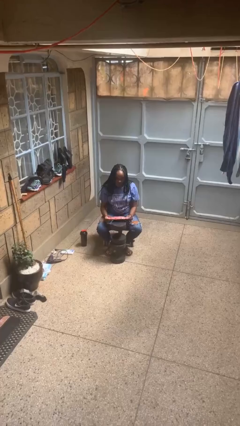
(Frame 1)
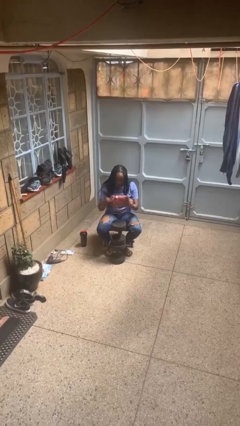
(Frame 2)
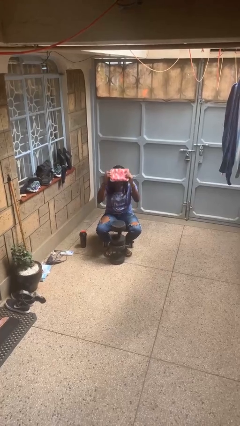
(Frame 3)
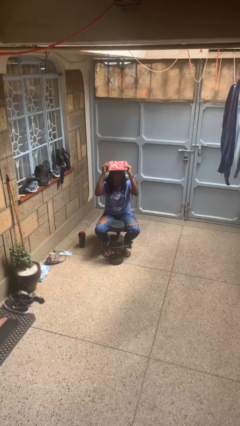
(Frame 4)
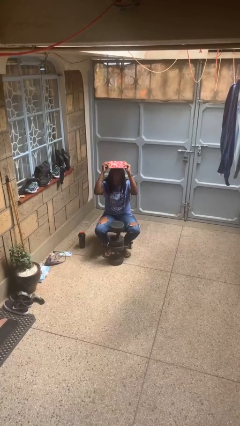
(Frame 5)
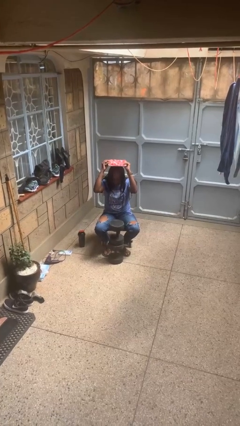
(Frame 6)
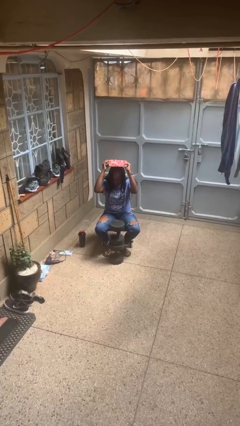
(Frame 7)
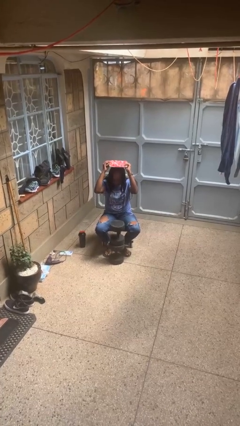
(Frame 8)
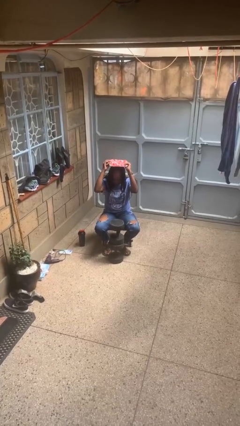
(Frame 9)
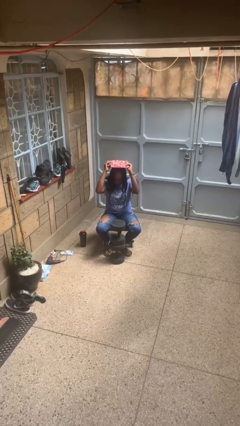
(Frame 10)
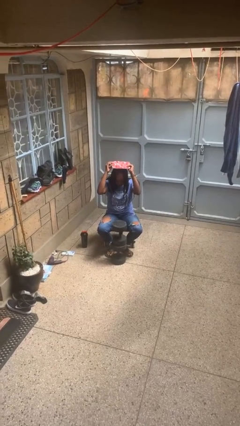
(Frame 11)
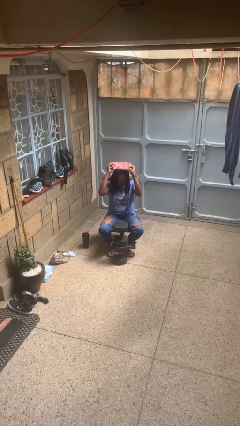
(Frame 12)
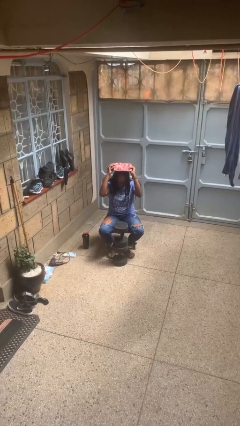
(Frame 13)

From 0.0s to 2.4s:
person holds object above head

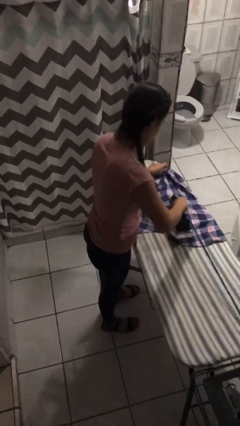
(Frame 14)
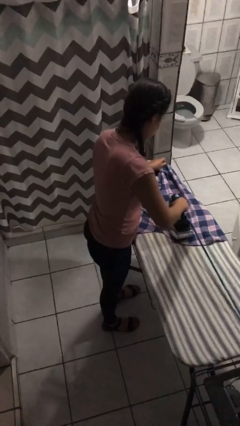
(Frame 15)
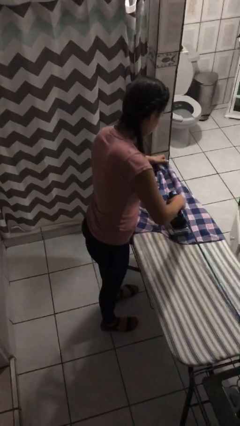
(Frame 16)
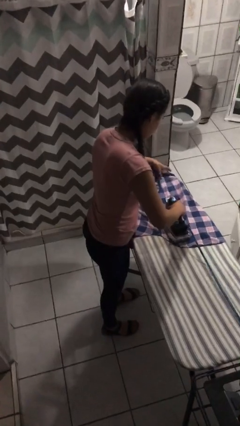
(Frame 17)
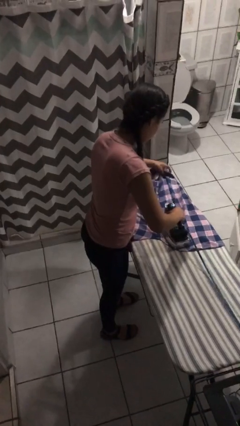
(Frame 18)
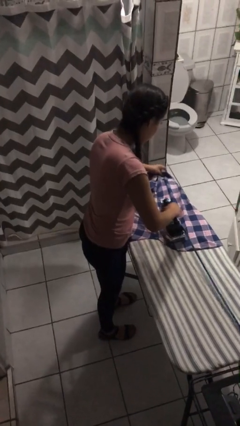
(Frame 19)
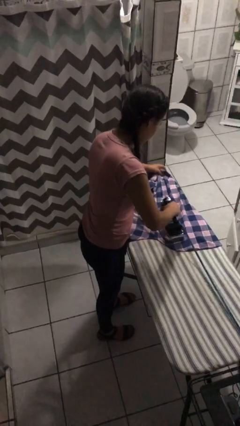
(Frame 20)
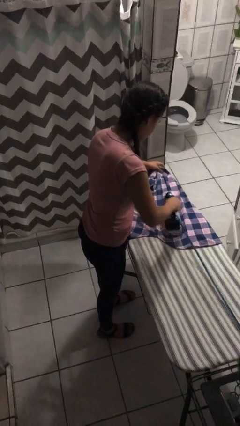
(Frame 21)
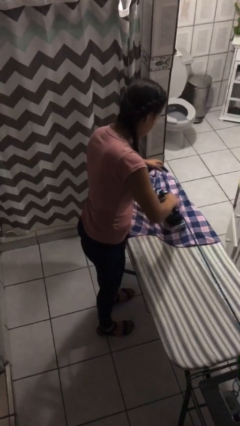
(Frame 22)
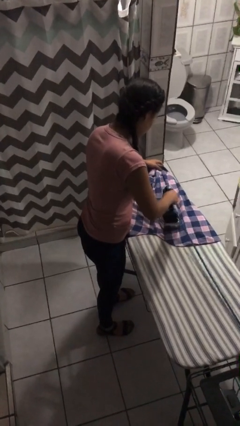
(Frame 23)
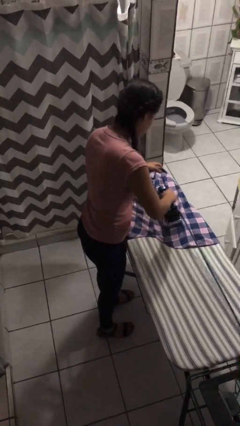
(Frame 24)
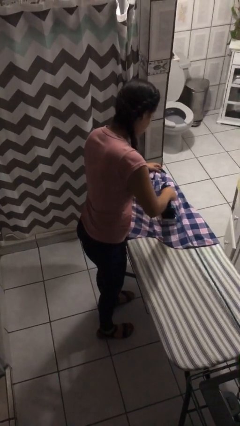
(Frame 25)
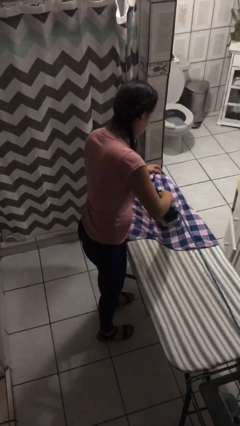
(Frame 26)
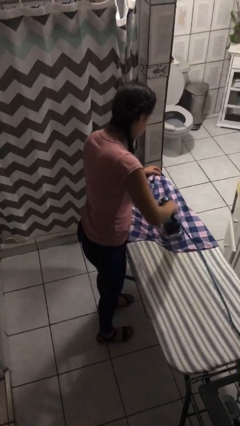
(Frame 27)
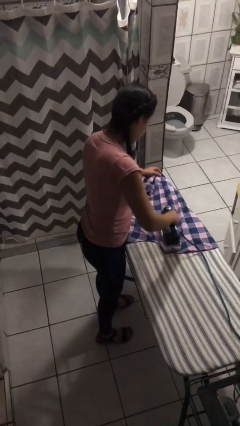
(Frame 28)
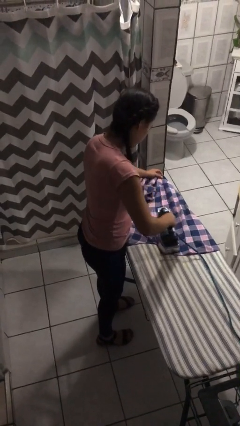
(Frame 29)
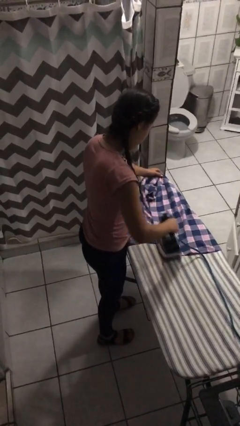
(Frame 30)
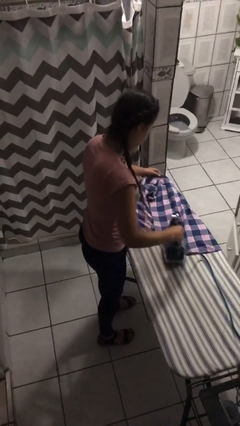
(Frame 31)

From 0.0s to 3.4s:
person irons clothes

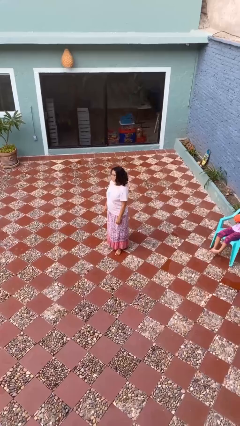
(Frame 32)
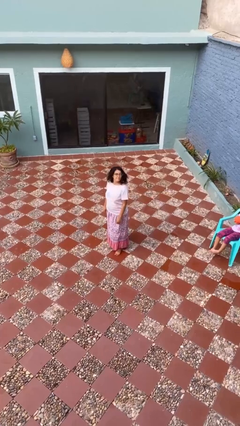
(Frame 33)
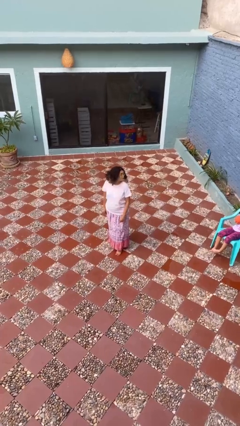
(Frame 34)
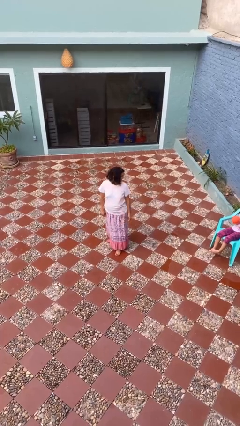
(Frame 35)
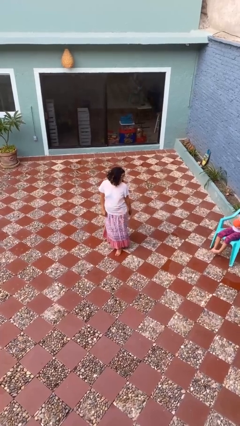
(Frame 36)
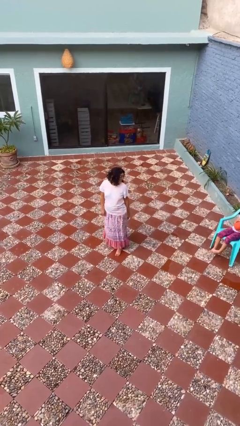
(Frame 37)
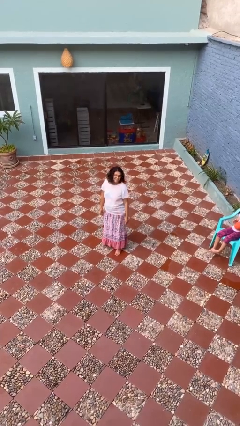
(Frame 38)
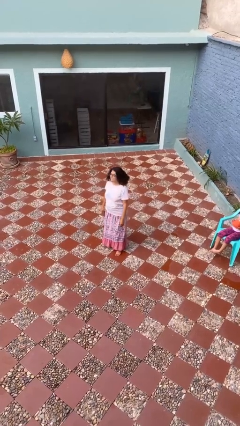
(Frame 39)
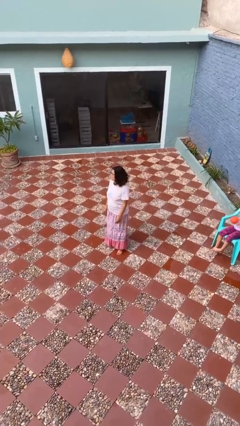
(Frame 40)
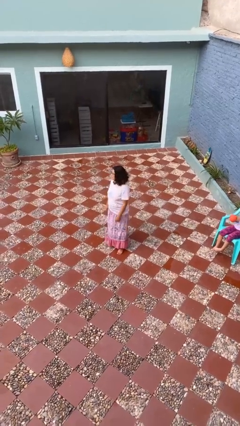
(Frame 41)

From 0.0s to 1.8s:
person looks over shoulder

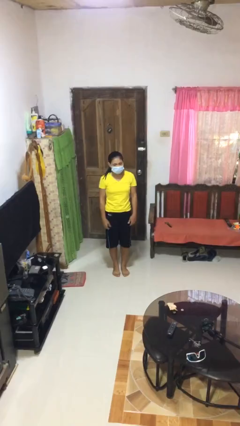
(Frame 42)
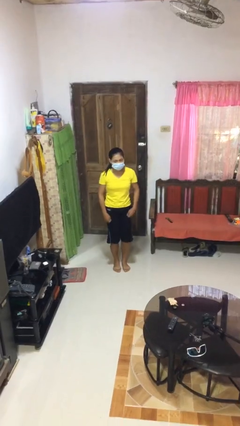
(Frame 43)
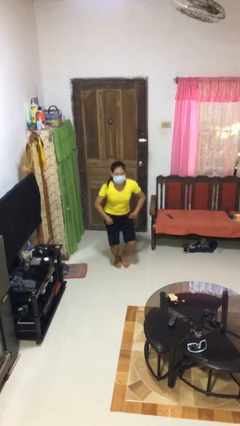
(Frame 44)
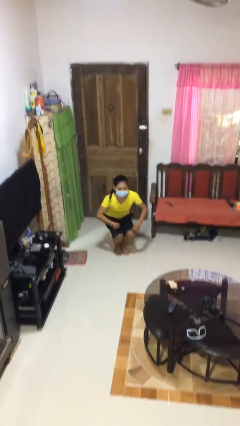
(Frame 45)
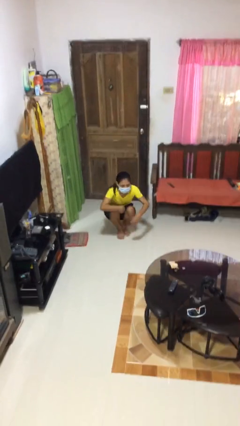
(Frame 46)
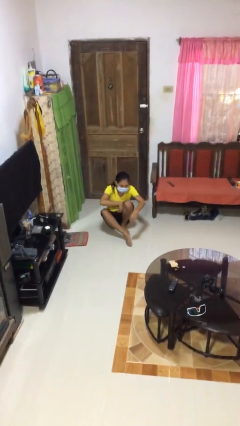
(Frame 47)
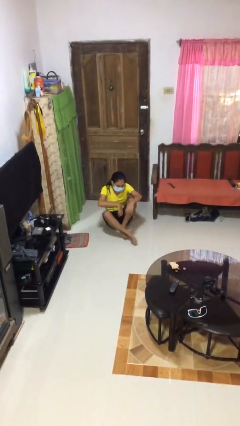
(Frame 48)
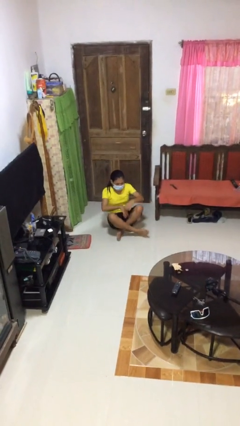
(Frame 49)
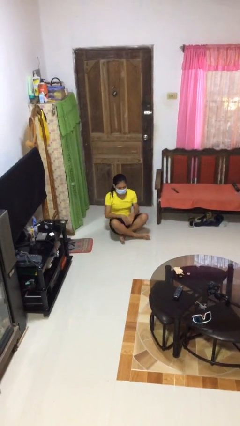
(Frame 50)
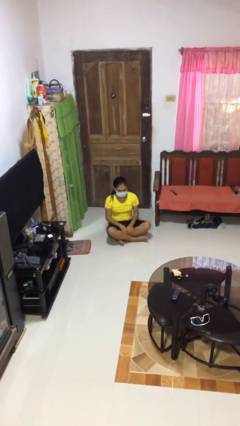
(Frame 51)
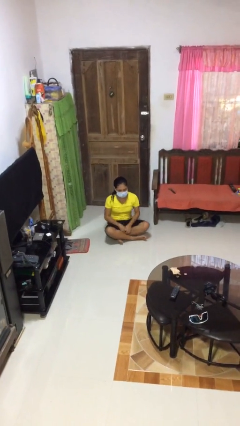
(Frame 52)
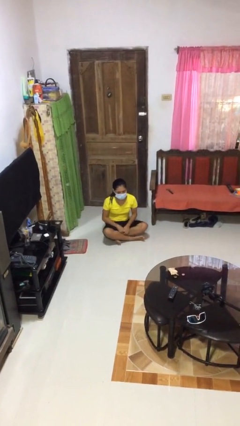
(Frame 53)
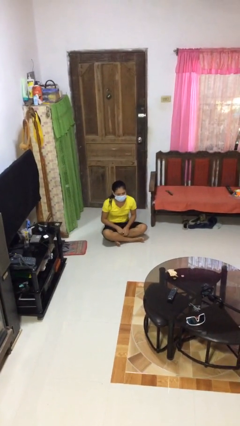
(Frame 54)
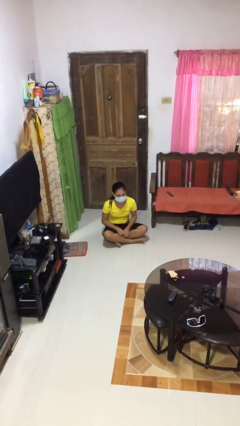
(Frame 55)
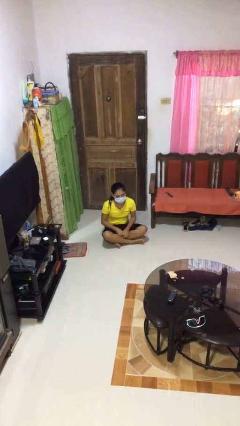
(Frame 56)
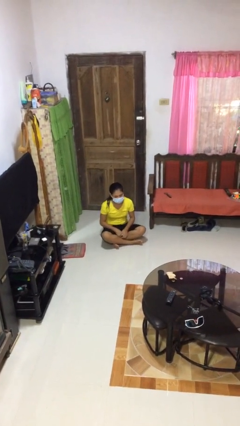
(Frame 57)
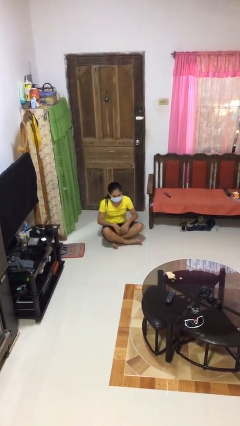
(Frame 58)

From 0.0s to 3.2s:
person sits crisscross

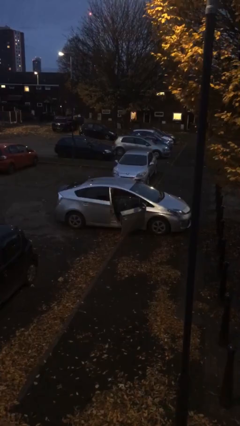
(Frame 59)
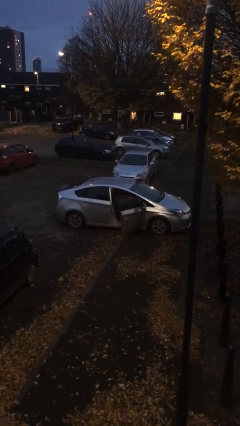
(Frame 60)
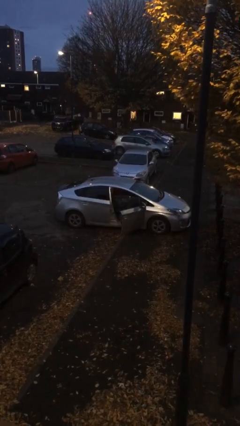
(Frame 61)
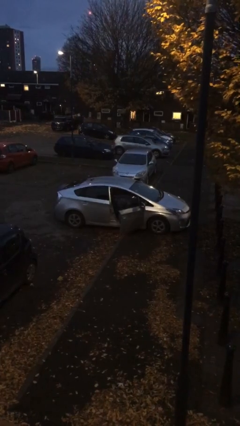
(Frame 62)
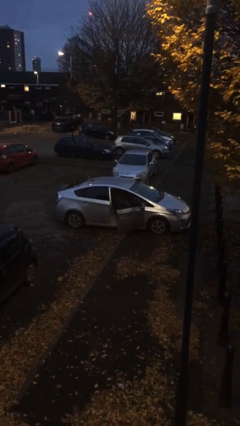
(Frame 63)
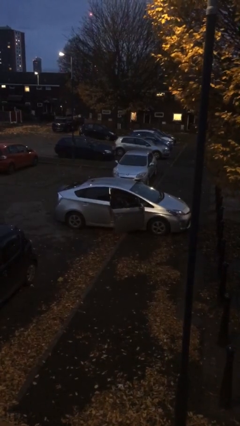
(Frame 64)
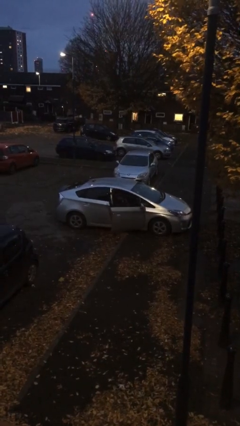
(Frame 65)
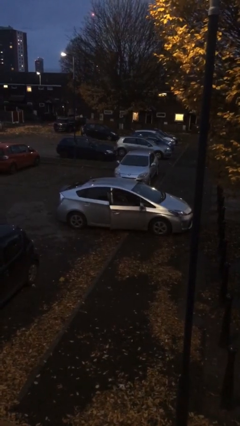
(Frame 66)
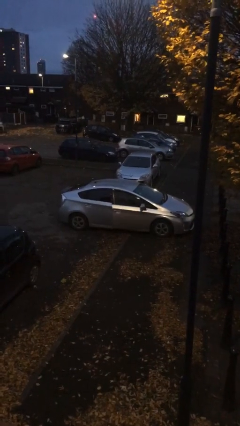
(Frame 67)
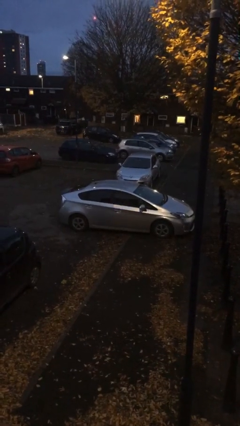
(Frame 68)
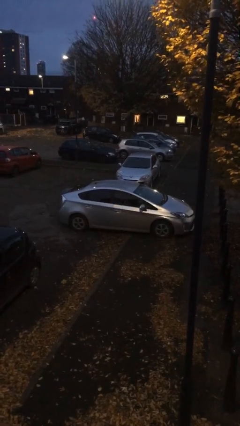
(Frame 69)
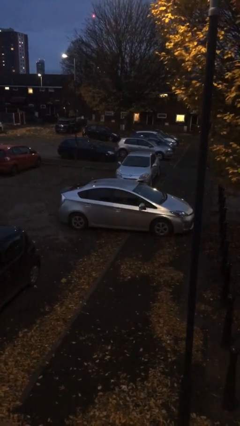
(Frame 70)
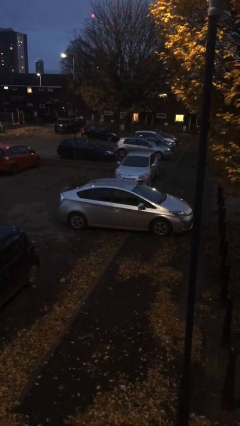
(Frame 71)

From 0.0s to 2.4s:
person closes car door

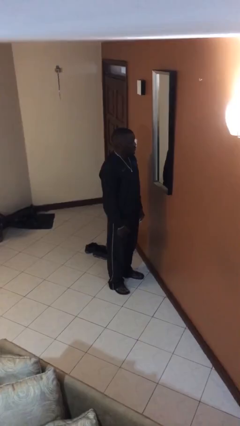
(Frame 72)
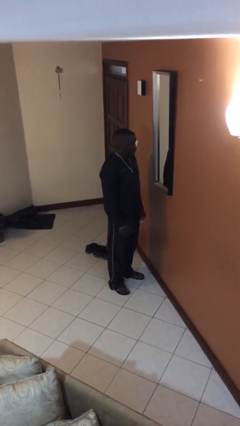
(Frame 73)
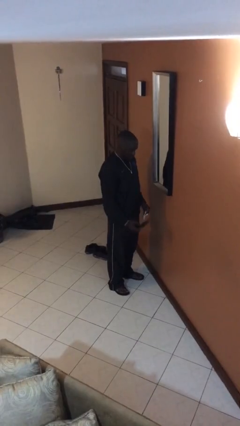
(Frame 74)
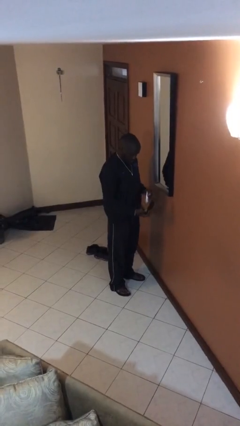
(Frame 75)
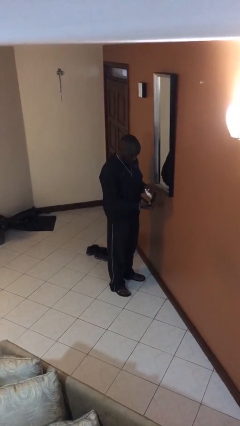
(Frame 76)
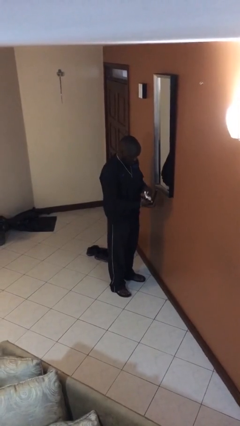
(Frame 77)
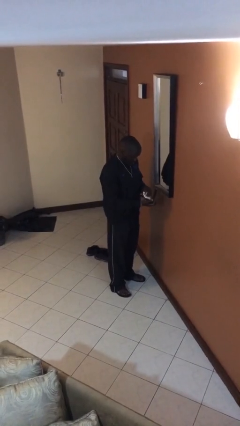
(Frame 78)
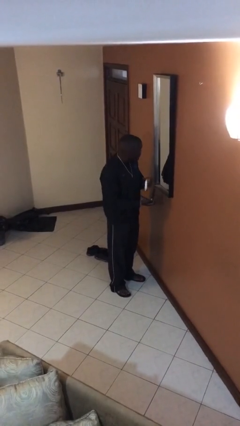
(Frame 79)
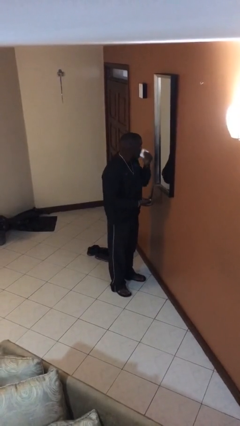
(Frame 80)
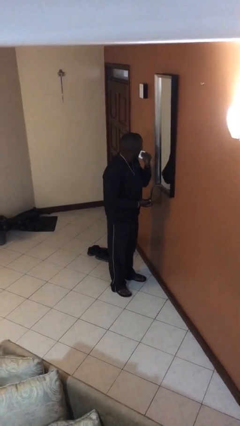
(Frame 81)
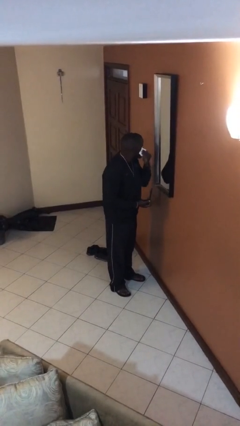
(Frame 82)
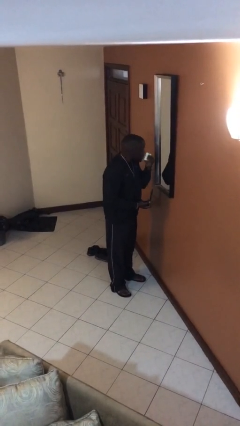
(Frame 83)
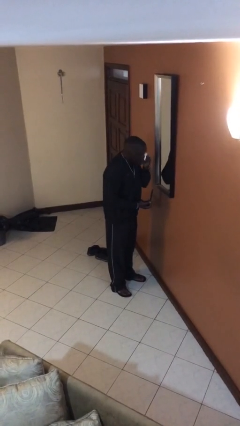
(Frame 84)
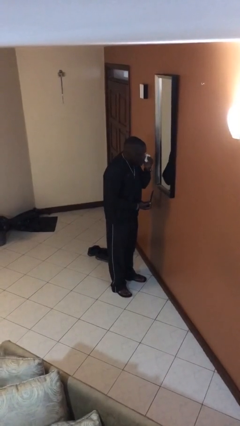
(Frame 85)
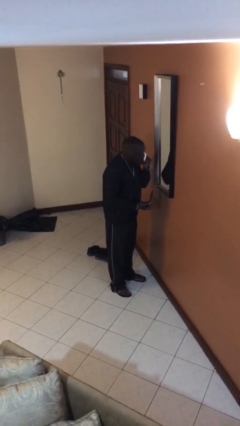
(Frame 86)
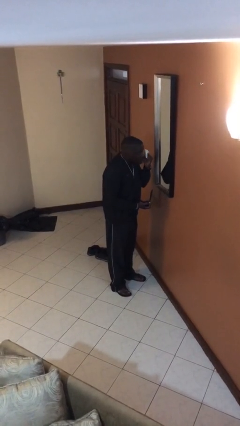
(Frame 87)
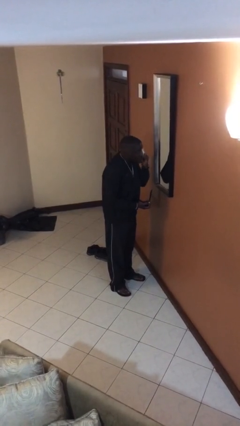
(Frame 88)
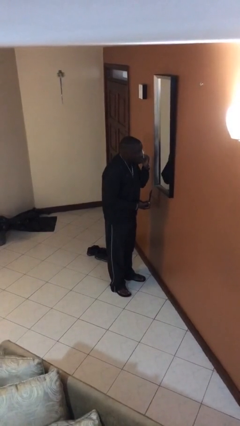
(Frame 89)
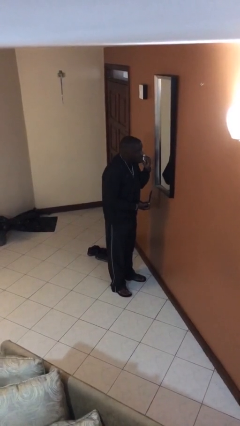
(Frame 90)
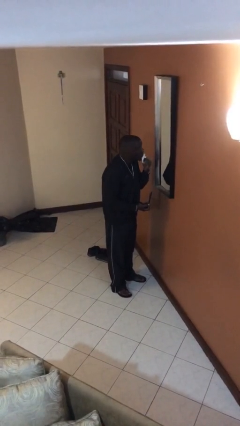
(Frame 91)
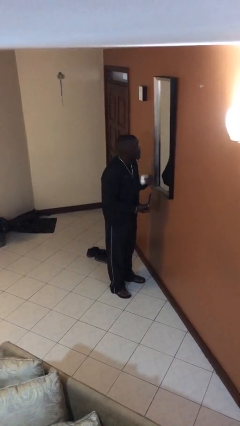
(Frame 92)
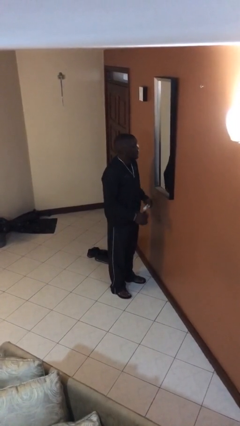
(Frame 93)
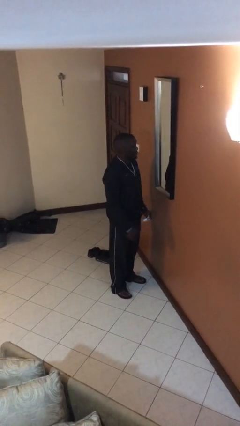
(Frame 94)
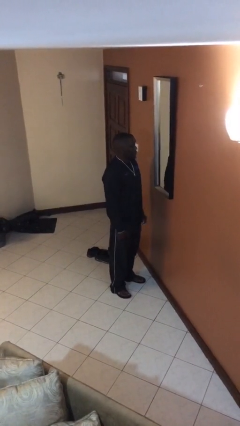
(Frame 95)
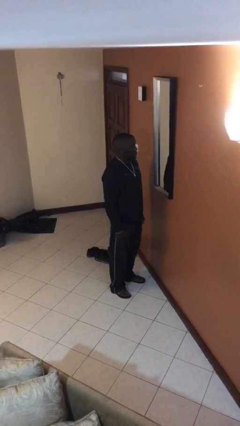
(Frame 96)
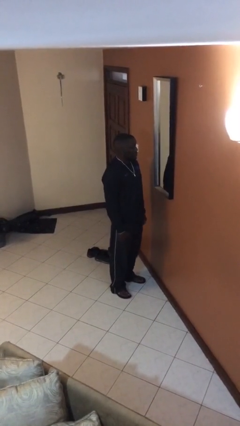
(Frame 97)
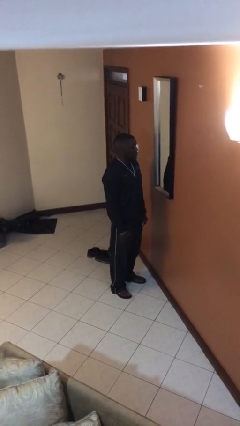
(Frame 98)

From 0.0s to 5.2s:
person applies foundation makeup
